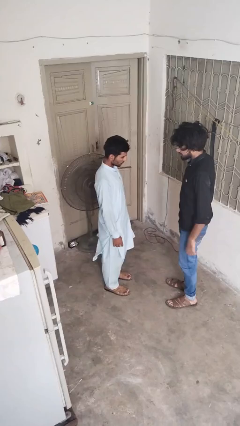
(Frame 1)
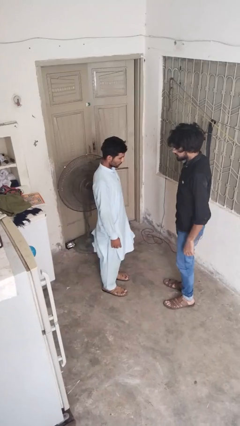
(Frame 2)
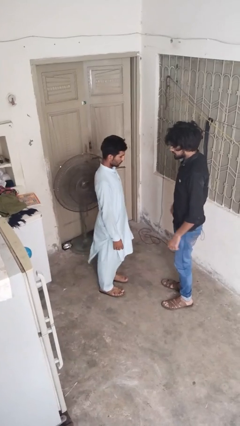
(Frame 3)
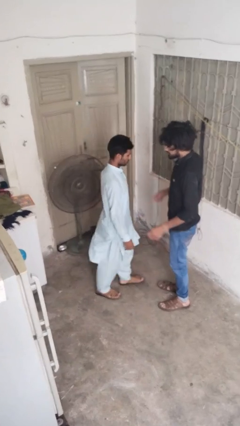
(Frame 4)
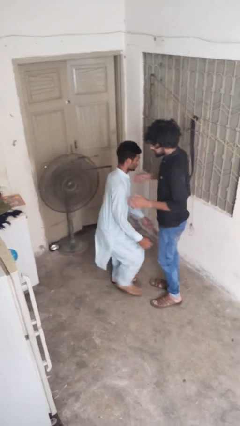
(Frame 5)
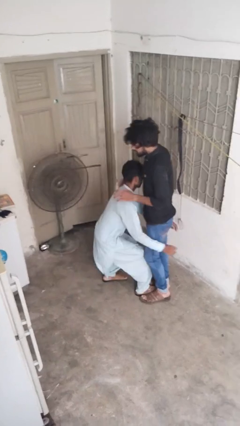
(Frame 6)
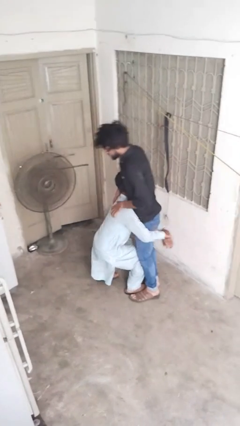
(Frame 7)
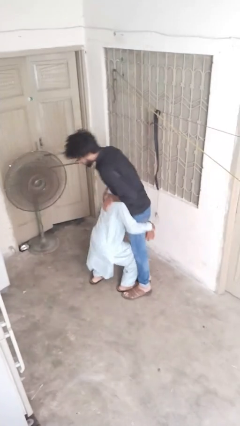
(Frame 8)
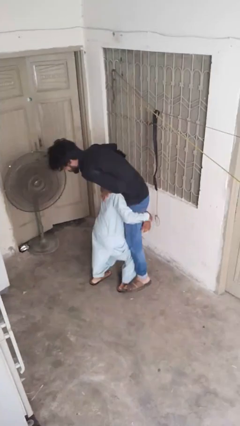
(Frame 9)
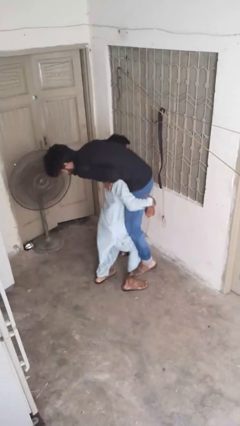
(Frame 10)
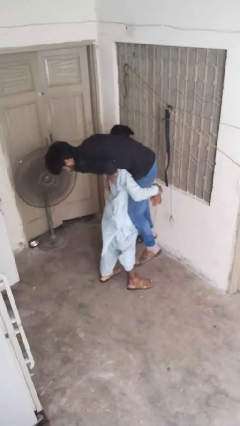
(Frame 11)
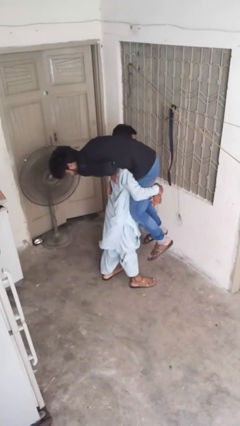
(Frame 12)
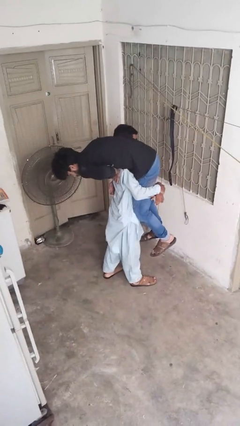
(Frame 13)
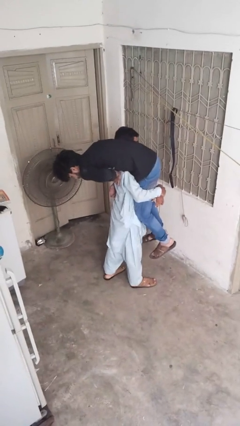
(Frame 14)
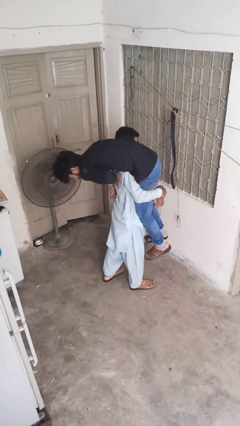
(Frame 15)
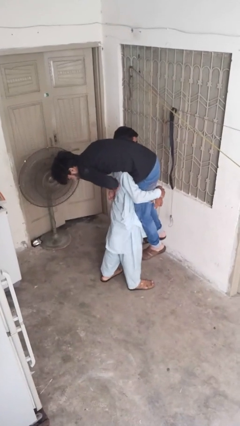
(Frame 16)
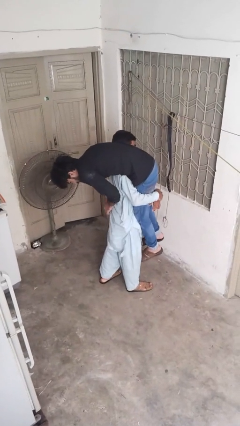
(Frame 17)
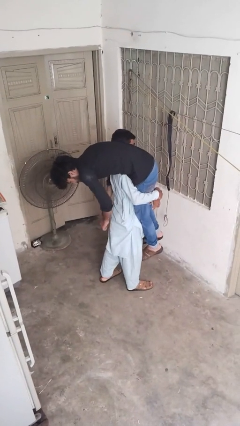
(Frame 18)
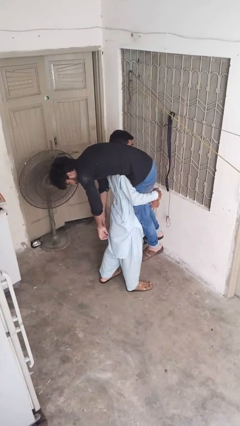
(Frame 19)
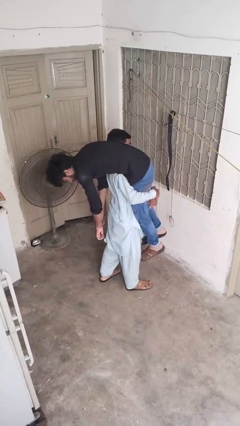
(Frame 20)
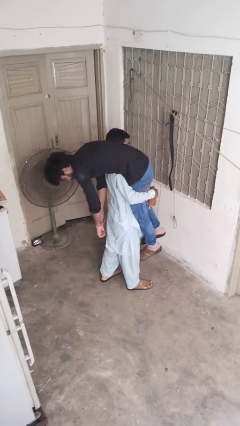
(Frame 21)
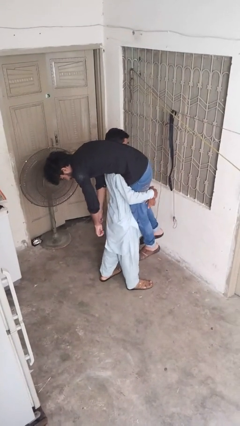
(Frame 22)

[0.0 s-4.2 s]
person carries person over shoulder

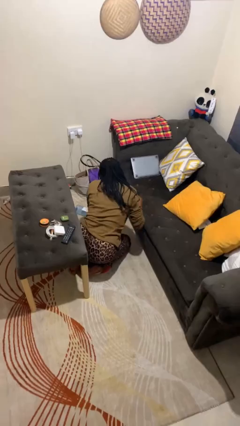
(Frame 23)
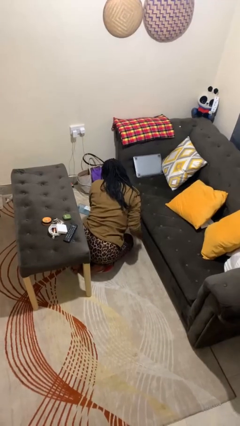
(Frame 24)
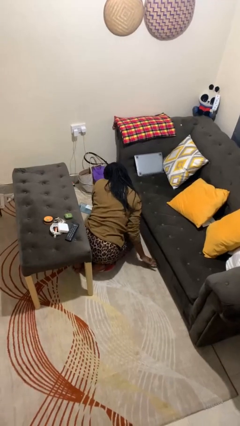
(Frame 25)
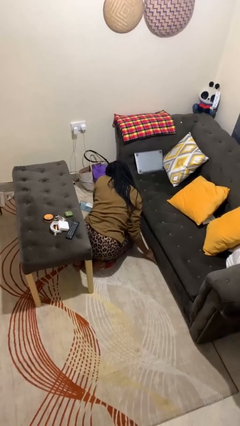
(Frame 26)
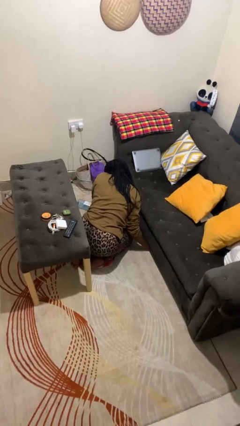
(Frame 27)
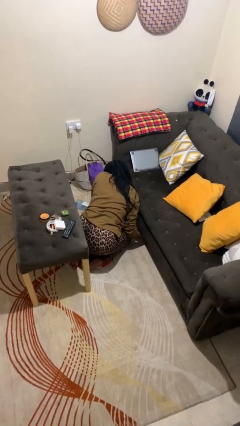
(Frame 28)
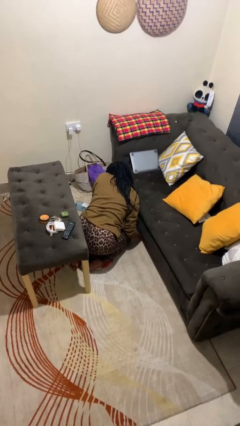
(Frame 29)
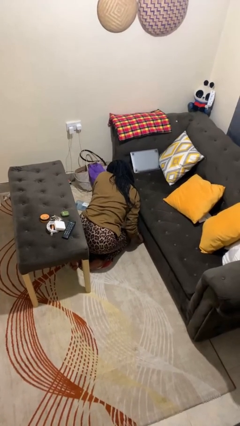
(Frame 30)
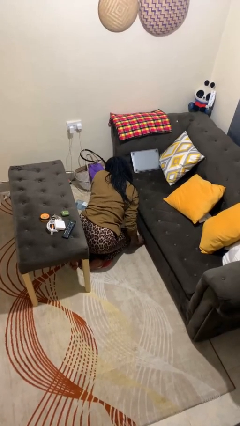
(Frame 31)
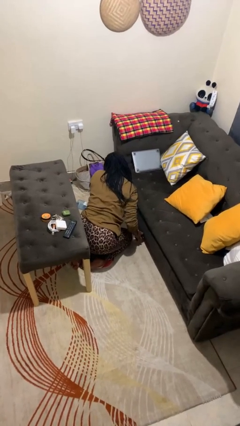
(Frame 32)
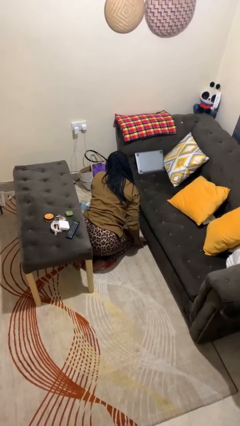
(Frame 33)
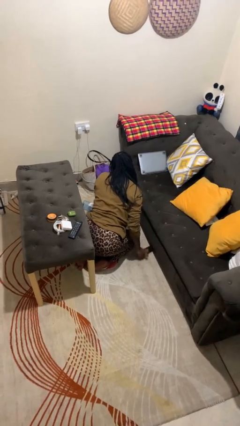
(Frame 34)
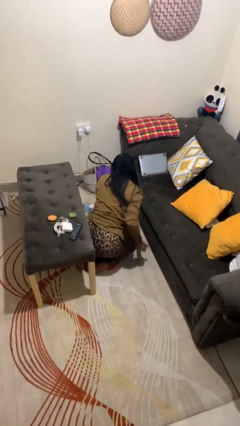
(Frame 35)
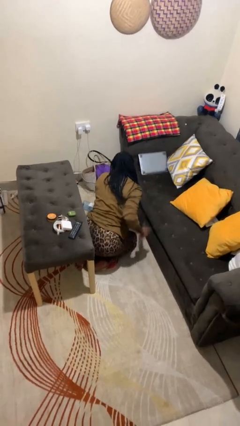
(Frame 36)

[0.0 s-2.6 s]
person searches under couch

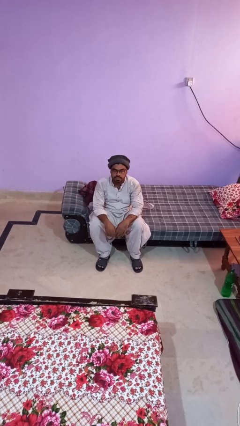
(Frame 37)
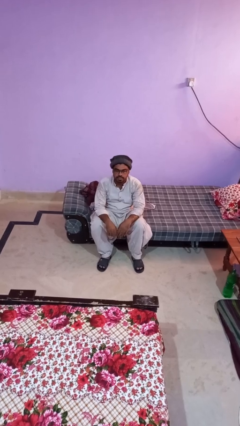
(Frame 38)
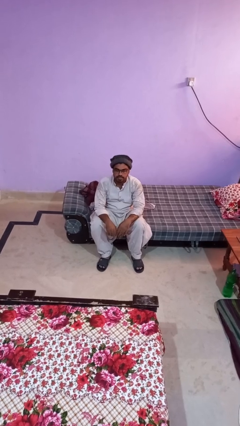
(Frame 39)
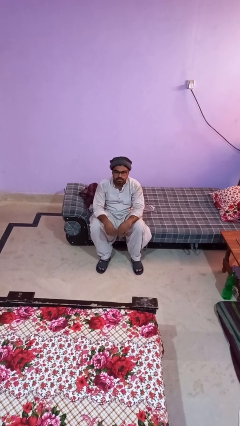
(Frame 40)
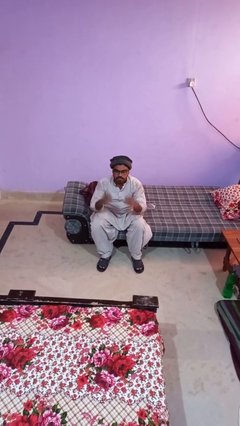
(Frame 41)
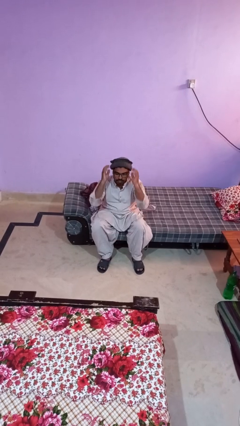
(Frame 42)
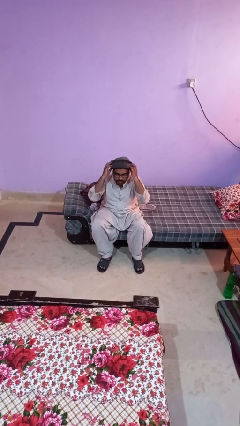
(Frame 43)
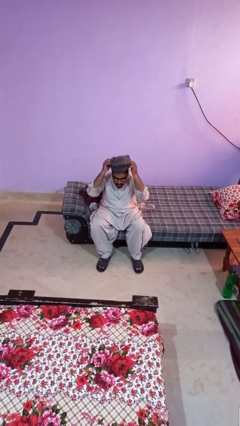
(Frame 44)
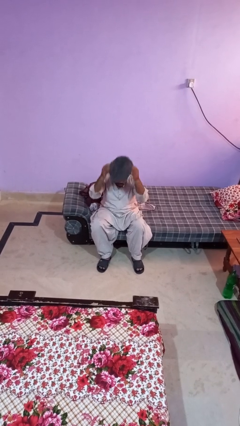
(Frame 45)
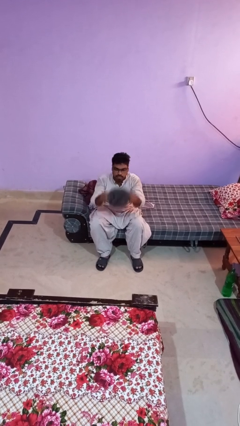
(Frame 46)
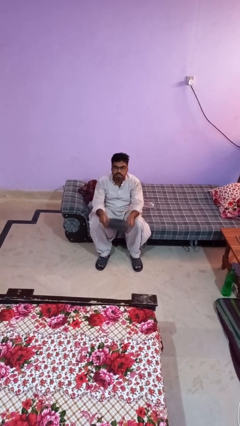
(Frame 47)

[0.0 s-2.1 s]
person takes off hat

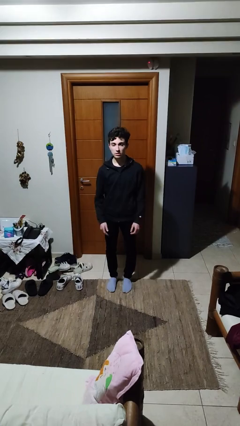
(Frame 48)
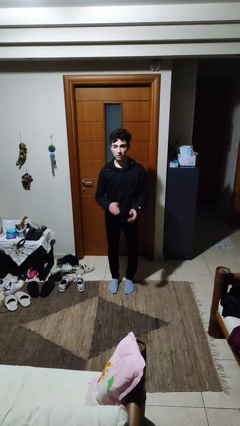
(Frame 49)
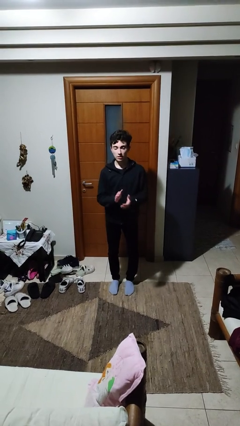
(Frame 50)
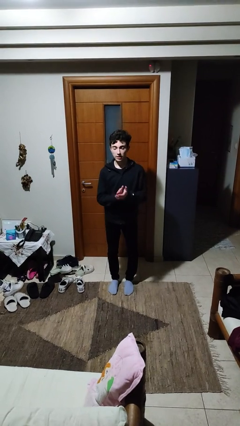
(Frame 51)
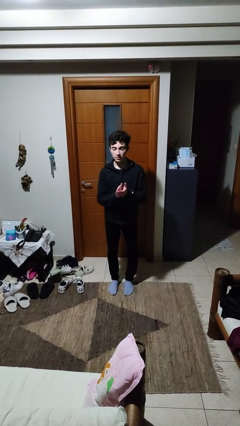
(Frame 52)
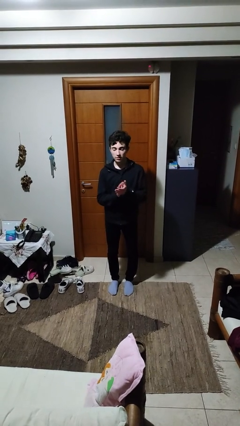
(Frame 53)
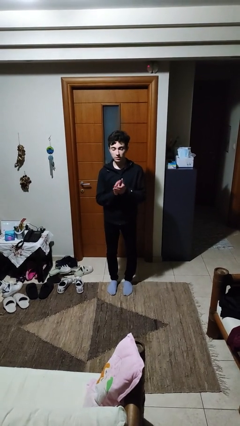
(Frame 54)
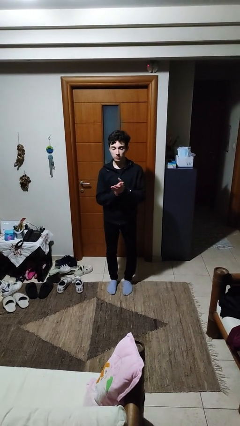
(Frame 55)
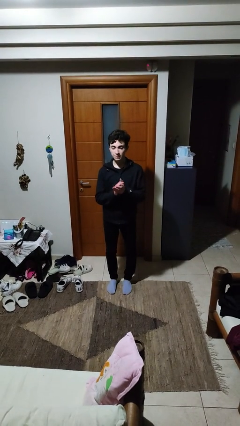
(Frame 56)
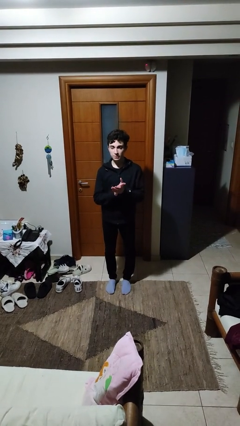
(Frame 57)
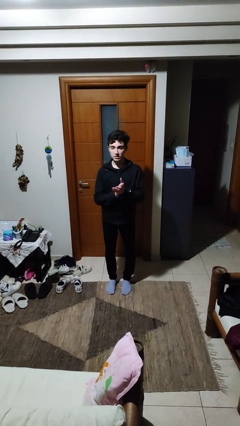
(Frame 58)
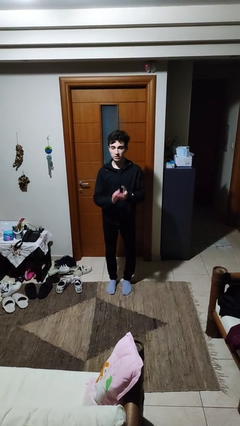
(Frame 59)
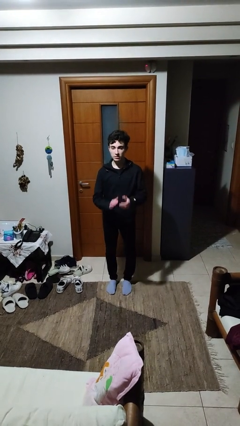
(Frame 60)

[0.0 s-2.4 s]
person claps hands

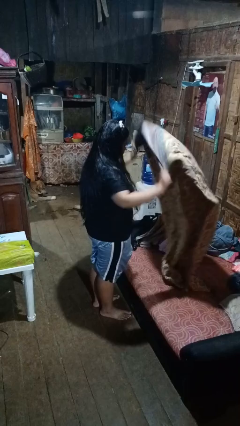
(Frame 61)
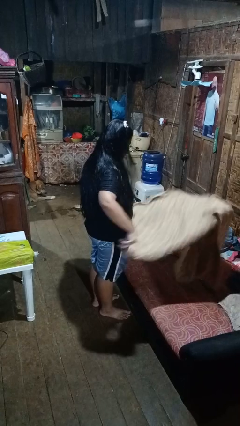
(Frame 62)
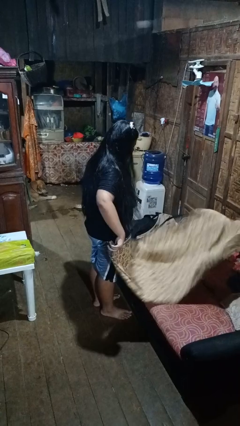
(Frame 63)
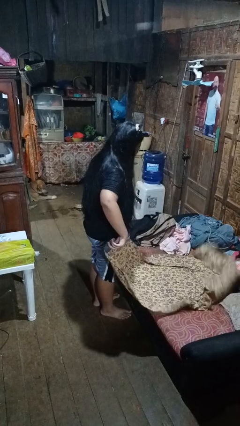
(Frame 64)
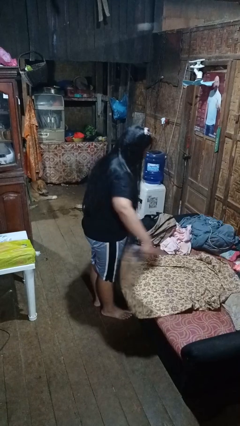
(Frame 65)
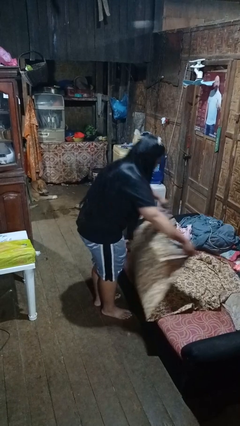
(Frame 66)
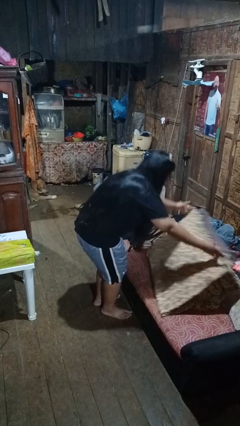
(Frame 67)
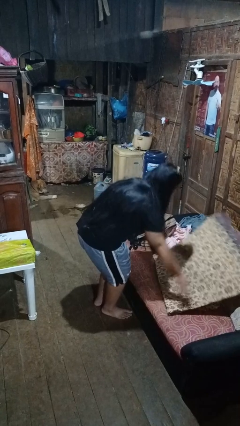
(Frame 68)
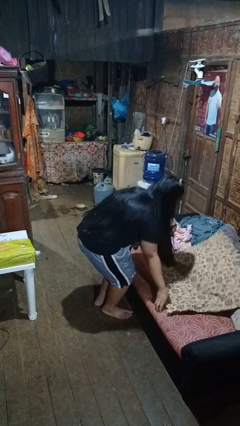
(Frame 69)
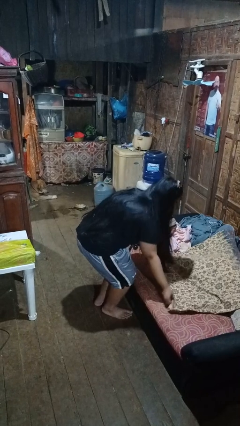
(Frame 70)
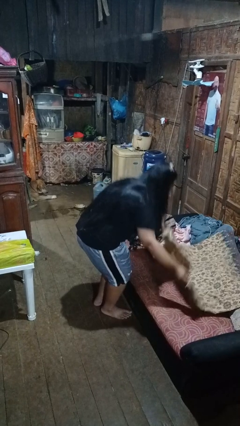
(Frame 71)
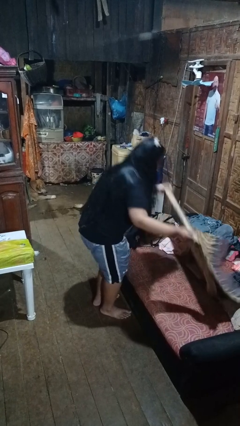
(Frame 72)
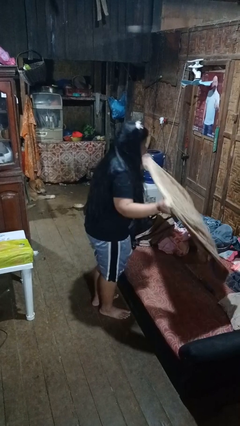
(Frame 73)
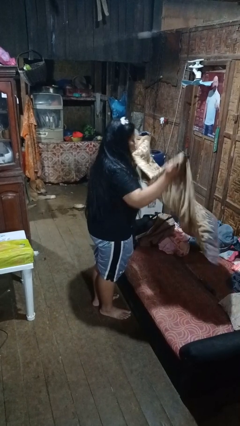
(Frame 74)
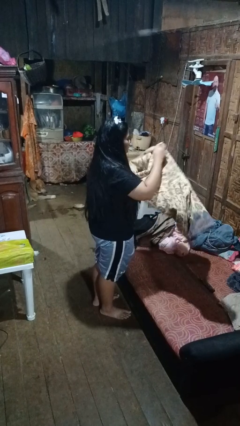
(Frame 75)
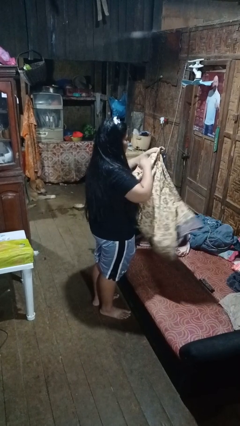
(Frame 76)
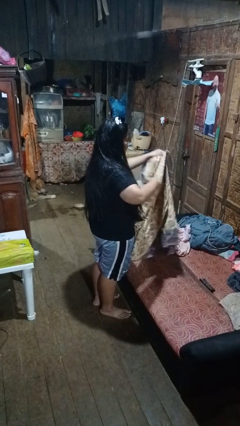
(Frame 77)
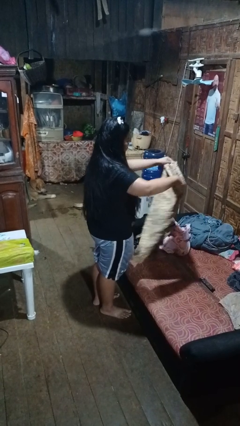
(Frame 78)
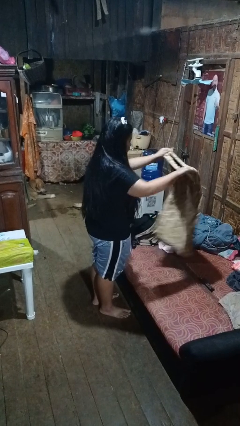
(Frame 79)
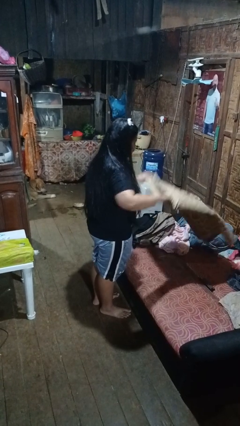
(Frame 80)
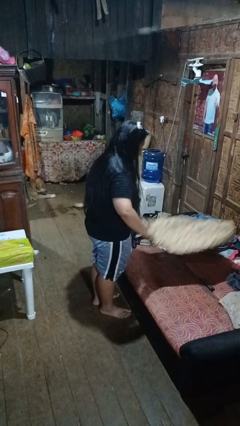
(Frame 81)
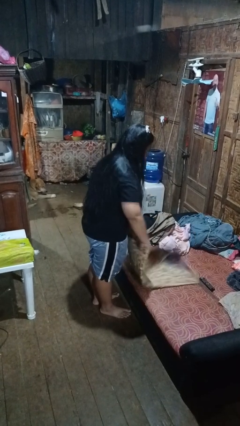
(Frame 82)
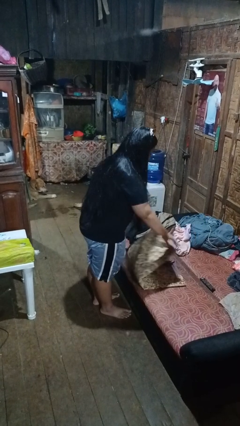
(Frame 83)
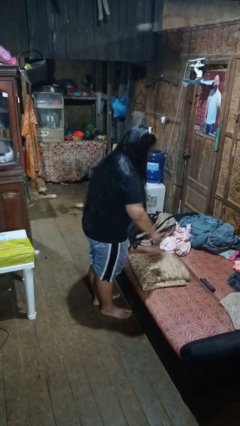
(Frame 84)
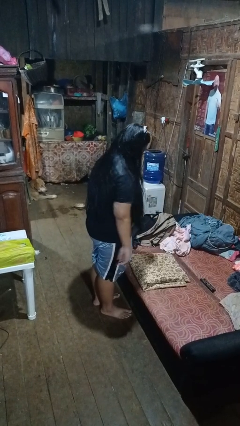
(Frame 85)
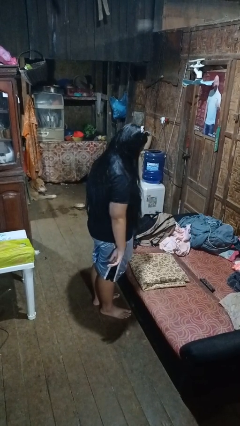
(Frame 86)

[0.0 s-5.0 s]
person folds blanket

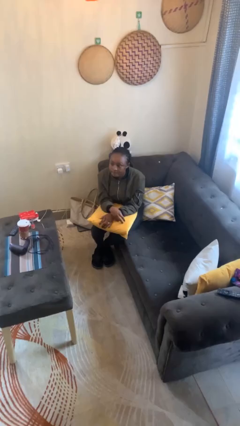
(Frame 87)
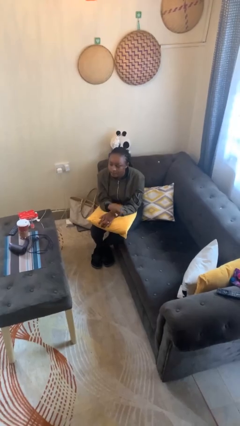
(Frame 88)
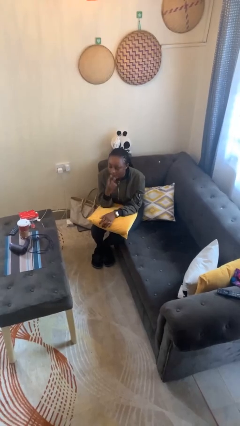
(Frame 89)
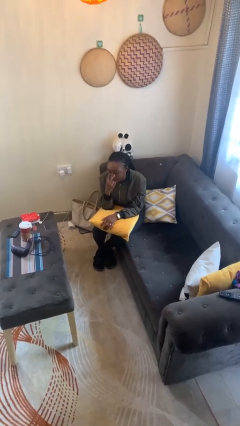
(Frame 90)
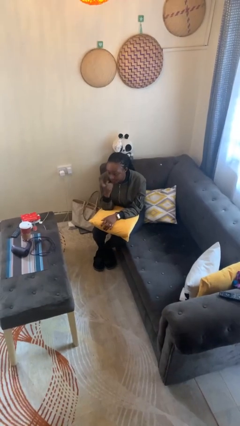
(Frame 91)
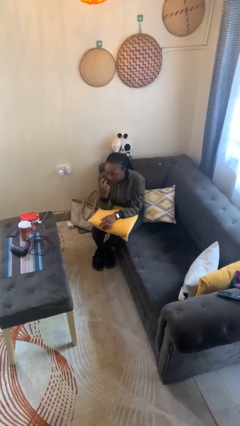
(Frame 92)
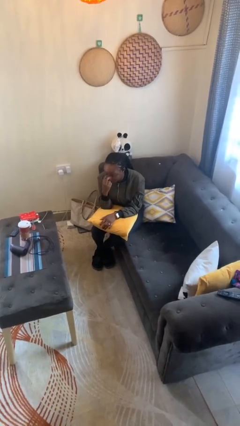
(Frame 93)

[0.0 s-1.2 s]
person gestures watch closely
